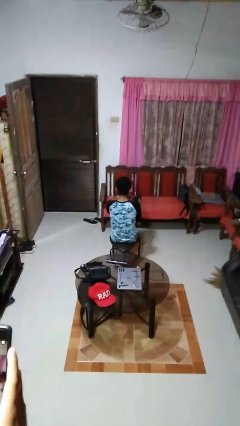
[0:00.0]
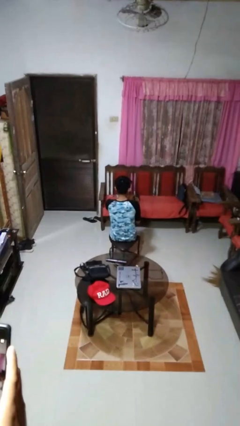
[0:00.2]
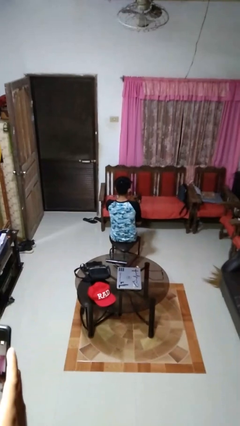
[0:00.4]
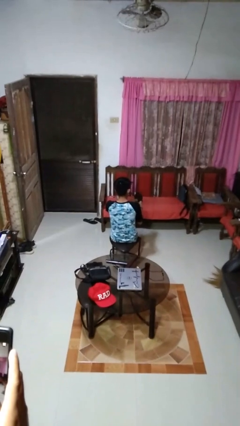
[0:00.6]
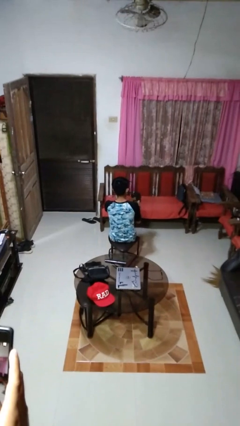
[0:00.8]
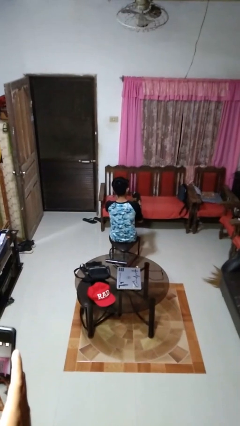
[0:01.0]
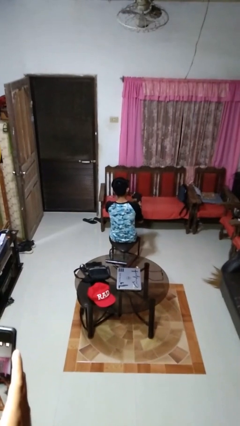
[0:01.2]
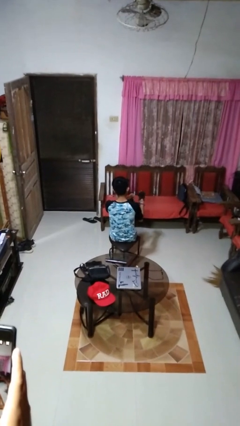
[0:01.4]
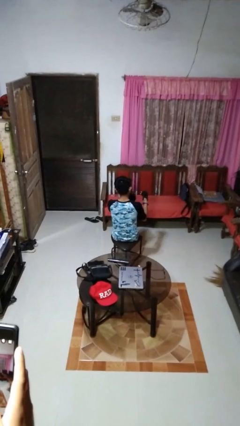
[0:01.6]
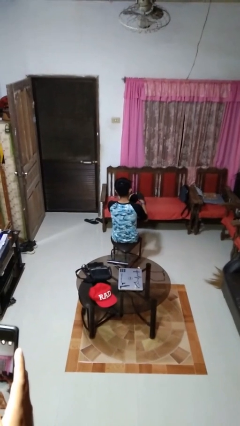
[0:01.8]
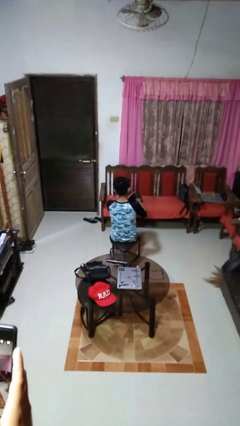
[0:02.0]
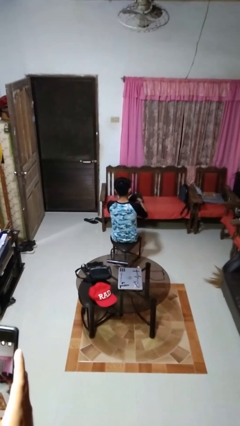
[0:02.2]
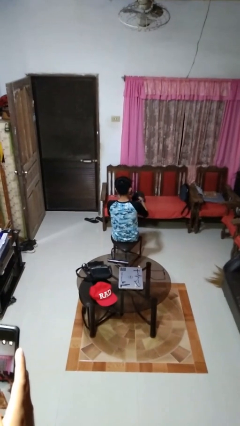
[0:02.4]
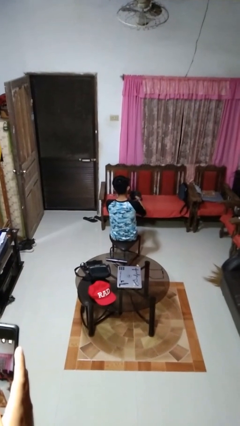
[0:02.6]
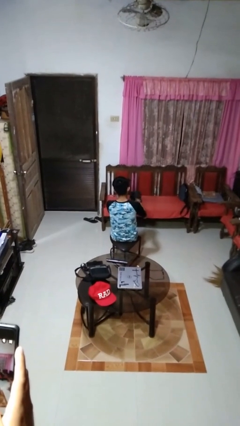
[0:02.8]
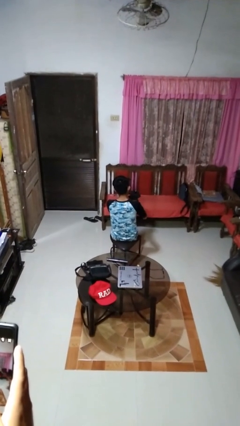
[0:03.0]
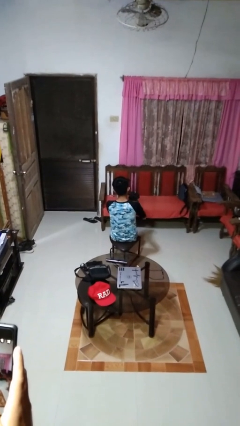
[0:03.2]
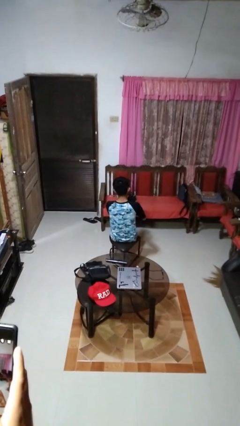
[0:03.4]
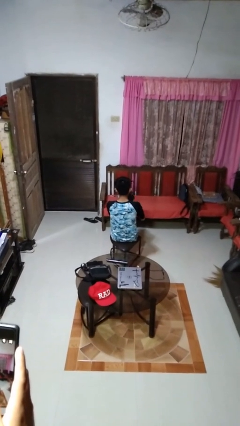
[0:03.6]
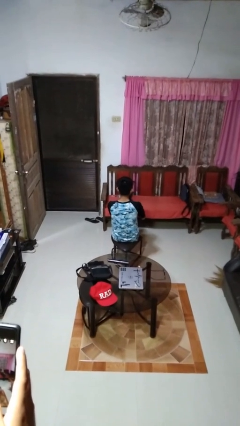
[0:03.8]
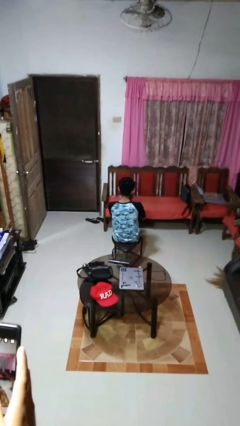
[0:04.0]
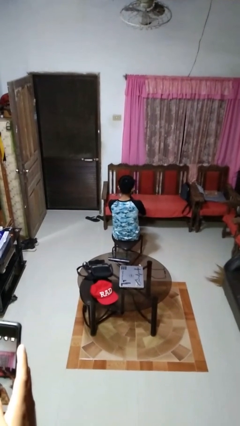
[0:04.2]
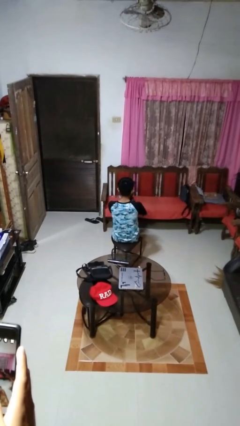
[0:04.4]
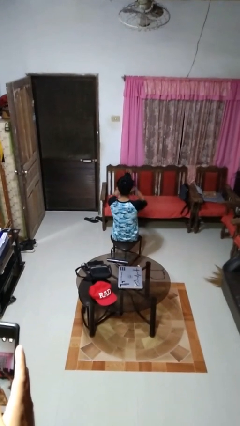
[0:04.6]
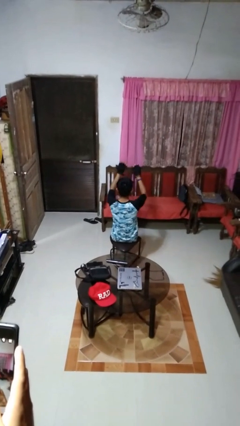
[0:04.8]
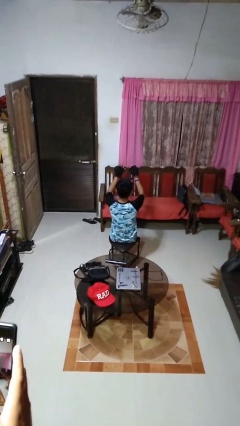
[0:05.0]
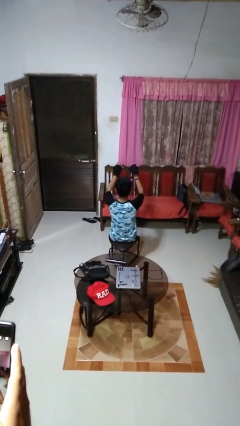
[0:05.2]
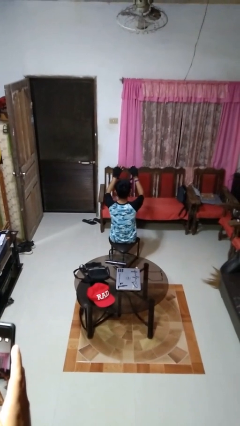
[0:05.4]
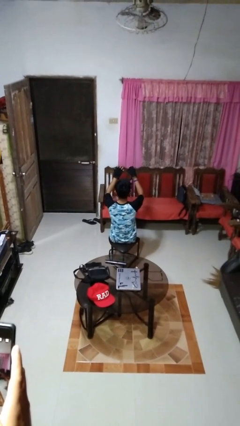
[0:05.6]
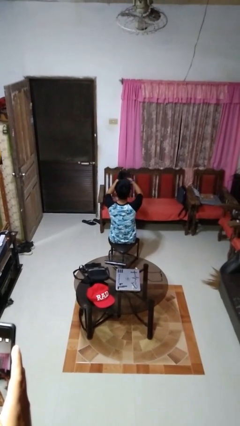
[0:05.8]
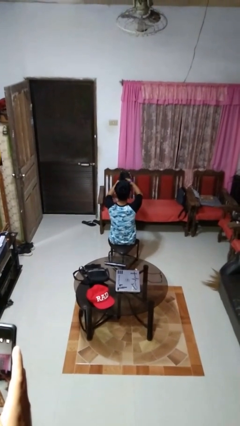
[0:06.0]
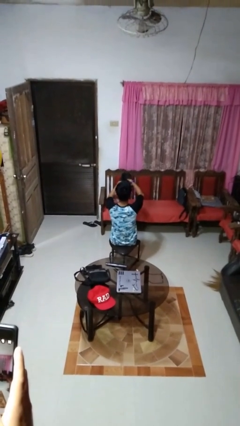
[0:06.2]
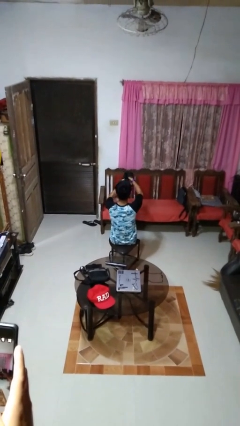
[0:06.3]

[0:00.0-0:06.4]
person puts on gloves

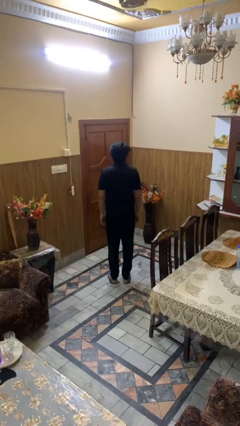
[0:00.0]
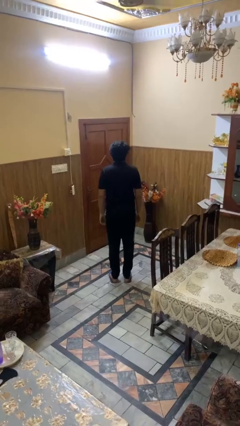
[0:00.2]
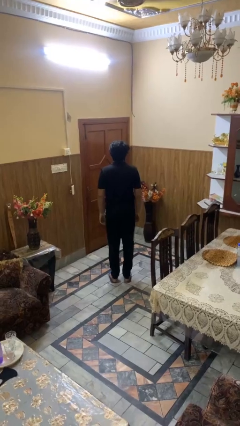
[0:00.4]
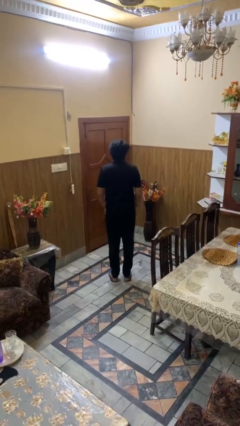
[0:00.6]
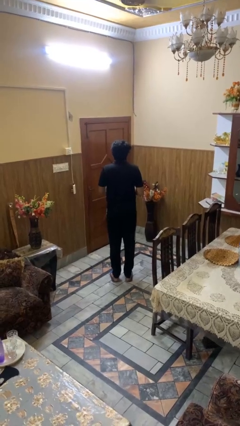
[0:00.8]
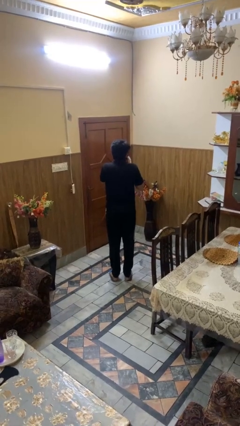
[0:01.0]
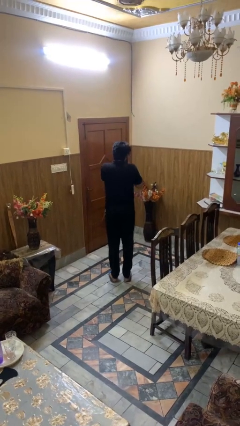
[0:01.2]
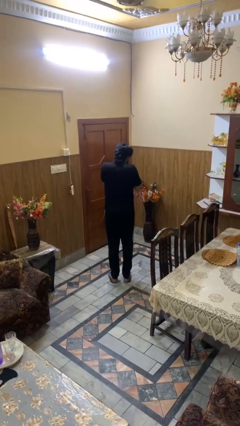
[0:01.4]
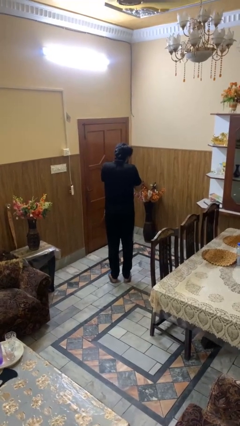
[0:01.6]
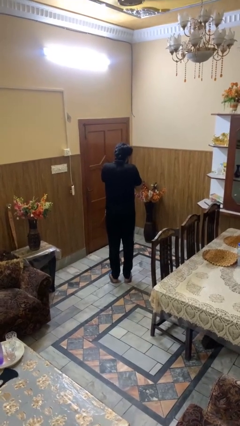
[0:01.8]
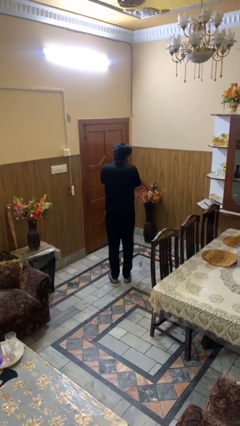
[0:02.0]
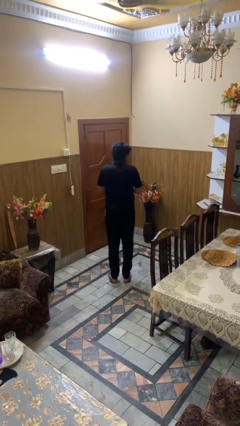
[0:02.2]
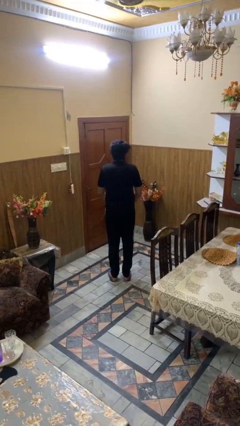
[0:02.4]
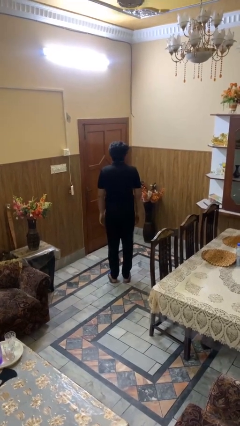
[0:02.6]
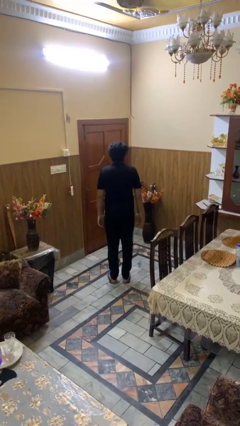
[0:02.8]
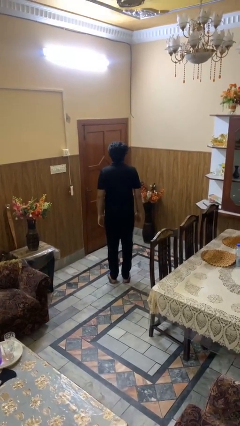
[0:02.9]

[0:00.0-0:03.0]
person sneezes into hand

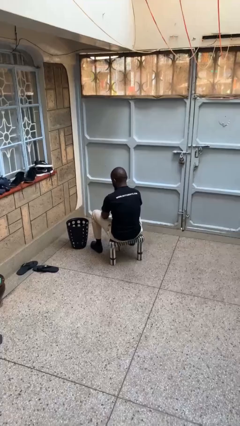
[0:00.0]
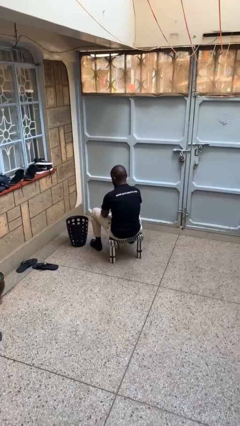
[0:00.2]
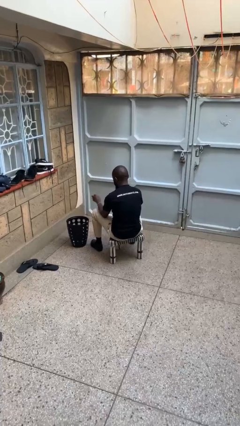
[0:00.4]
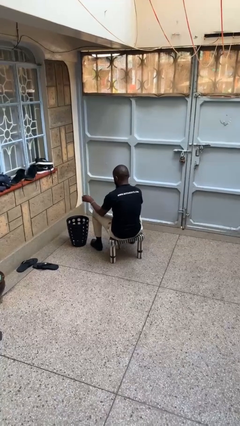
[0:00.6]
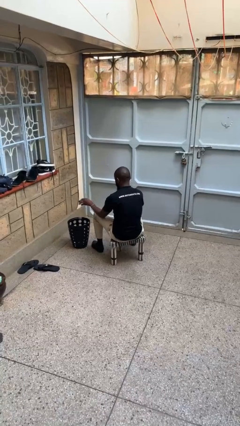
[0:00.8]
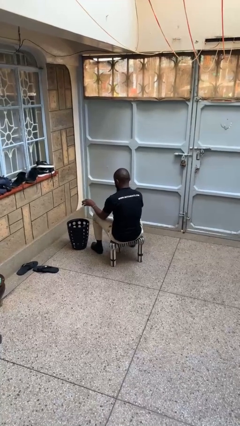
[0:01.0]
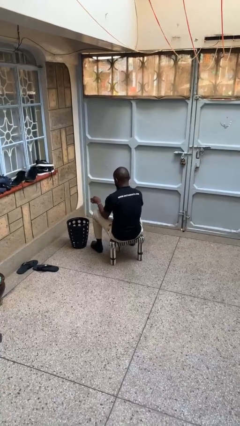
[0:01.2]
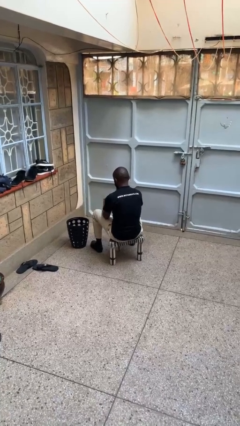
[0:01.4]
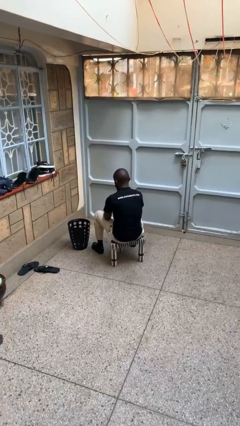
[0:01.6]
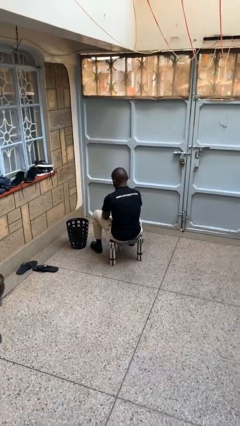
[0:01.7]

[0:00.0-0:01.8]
person discards trash

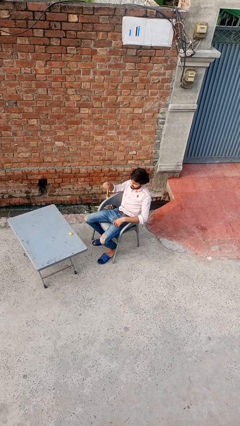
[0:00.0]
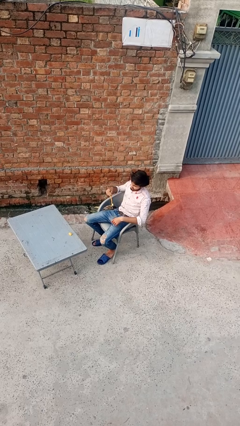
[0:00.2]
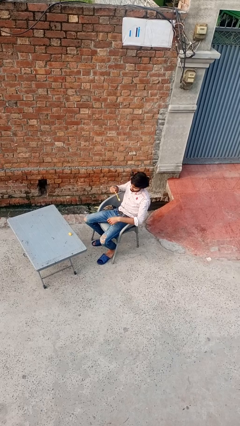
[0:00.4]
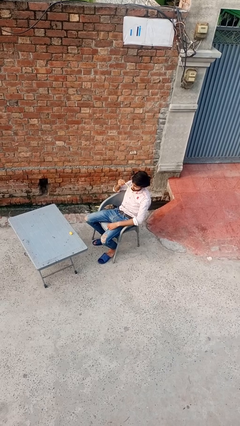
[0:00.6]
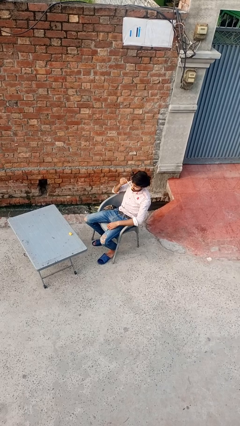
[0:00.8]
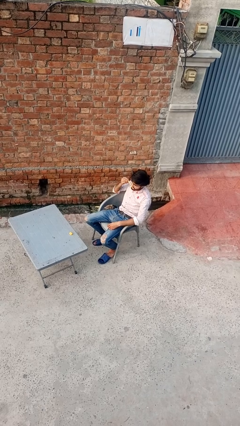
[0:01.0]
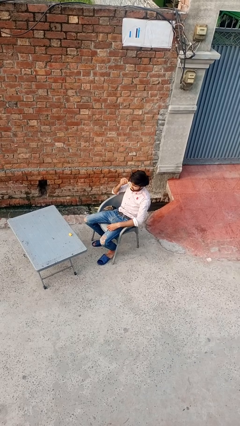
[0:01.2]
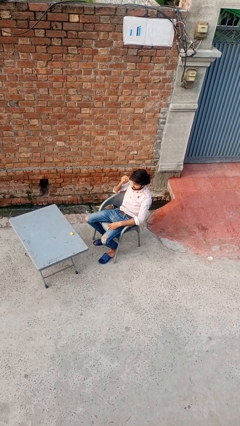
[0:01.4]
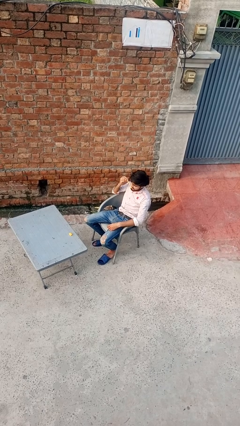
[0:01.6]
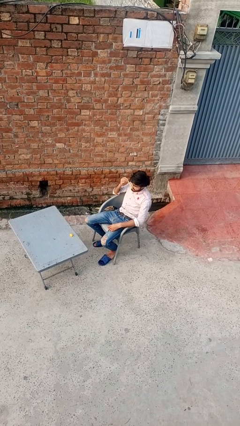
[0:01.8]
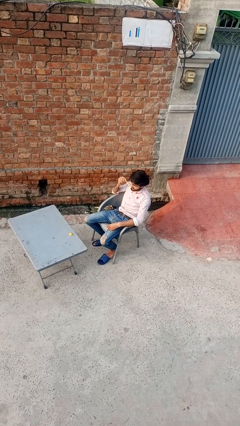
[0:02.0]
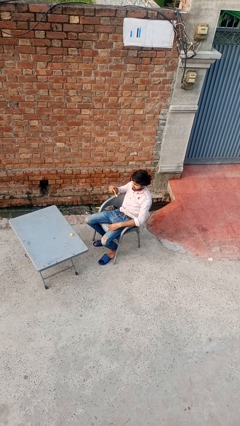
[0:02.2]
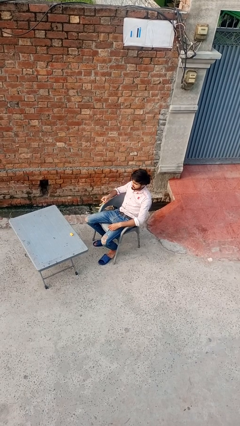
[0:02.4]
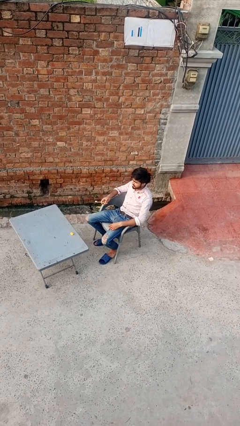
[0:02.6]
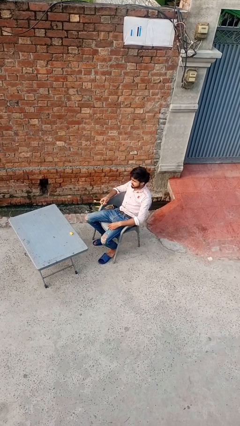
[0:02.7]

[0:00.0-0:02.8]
person brushes teeth

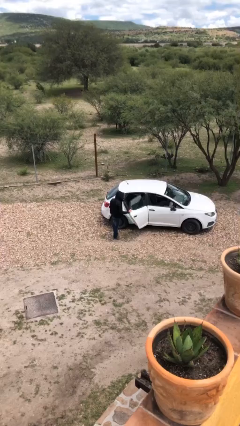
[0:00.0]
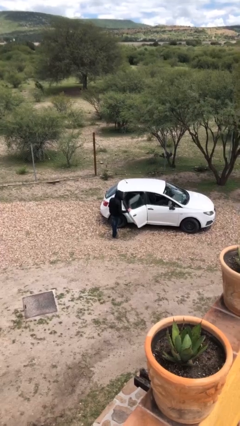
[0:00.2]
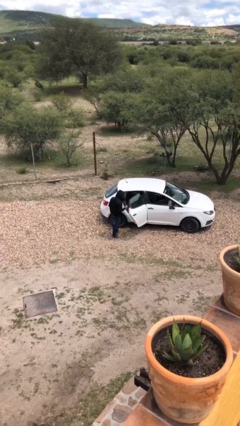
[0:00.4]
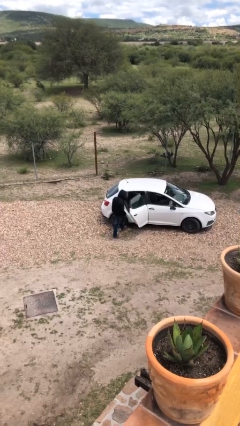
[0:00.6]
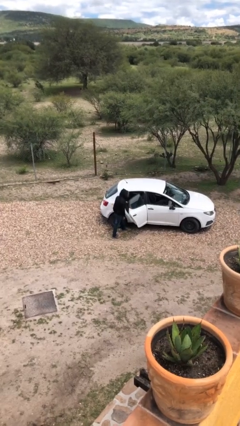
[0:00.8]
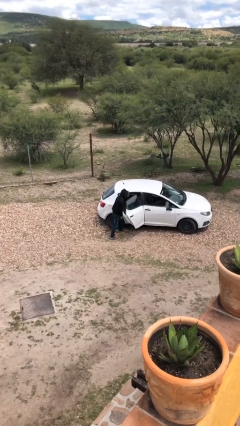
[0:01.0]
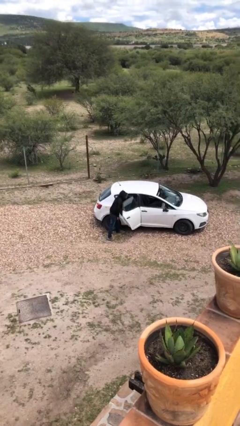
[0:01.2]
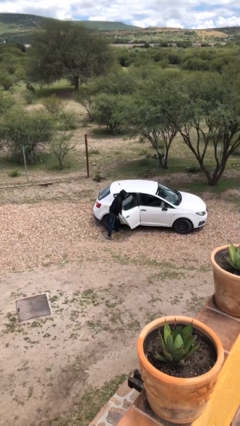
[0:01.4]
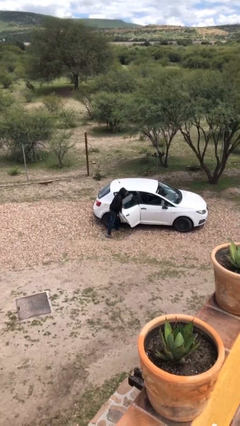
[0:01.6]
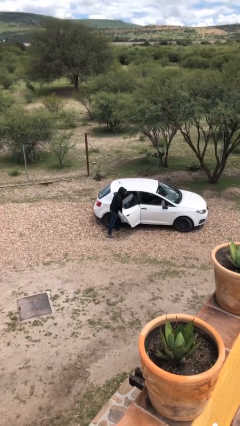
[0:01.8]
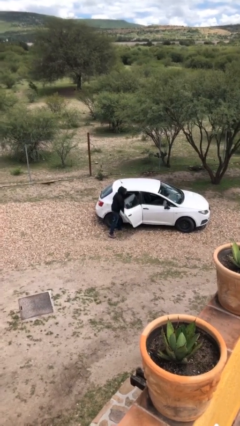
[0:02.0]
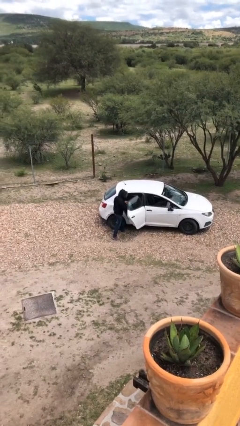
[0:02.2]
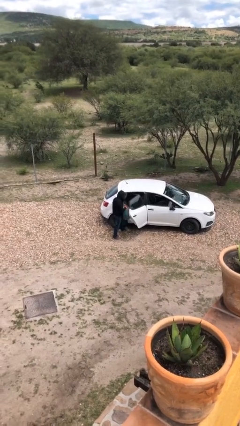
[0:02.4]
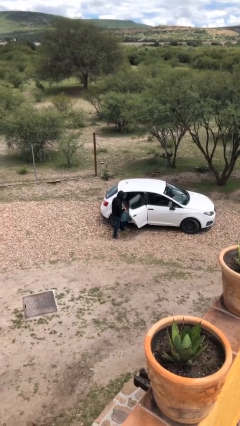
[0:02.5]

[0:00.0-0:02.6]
person unloads car

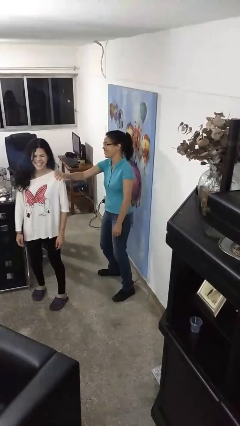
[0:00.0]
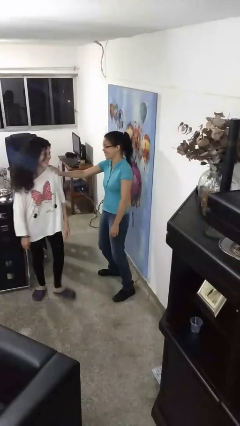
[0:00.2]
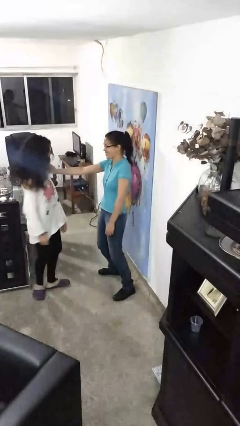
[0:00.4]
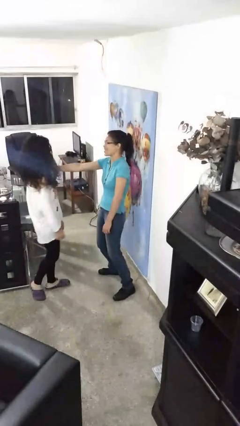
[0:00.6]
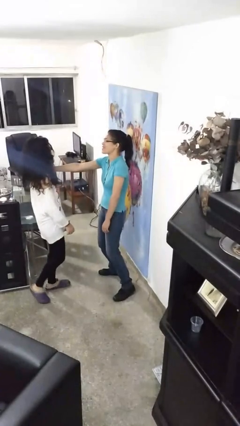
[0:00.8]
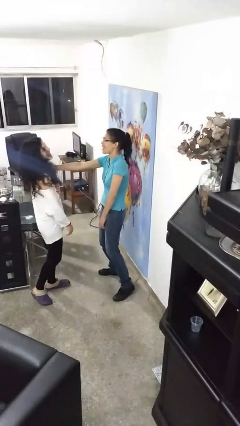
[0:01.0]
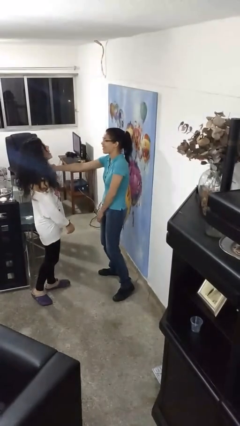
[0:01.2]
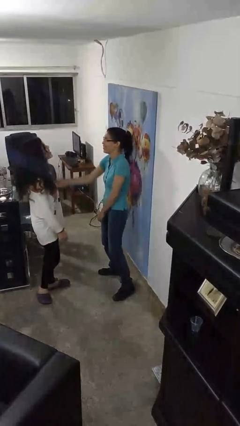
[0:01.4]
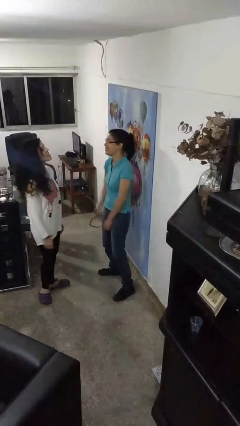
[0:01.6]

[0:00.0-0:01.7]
person spins person around
